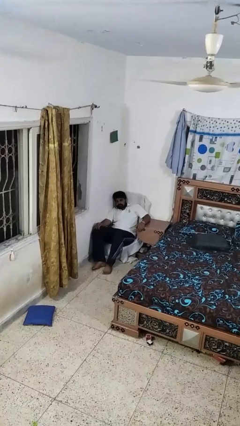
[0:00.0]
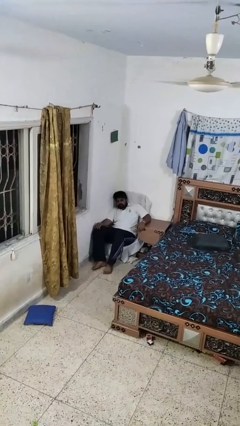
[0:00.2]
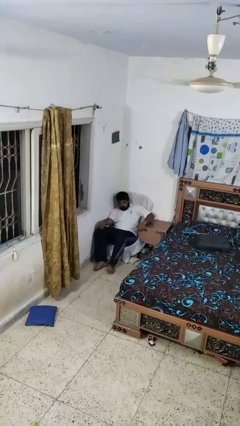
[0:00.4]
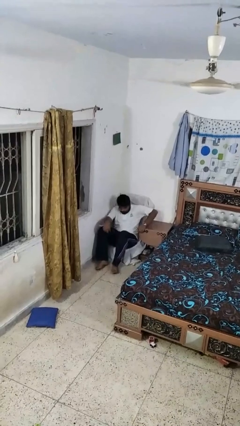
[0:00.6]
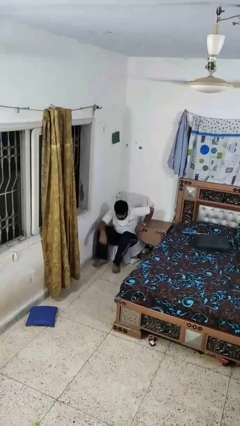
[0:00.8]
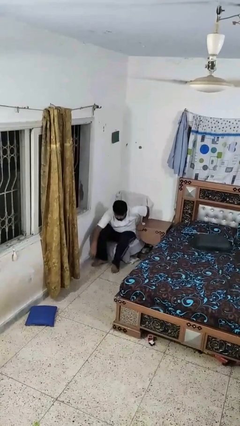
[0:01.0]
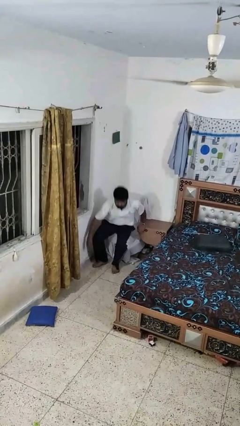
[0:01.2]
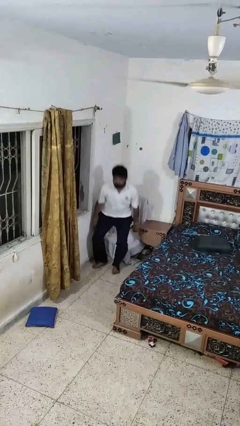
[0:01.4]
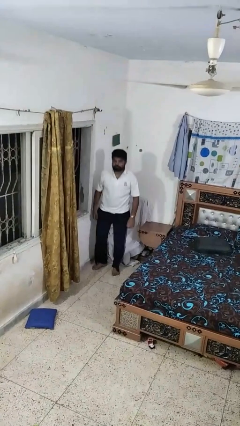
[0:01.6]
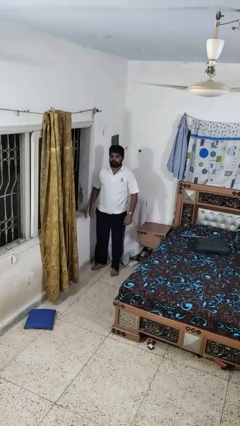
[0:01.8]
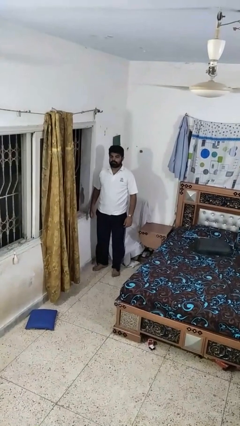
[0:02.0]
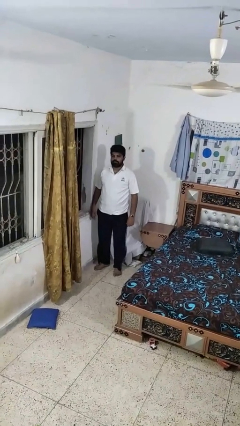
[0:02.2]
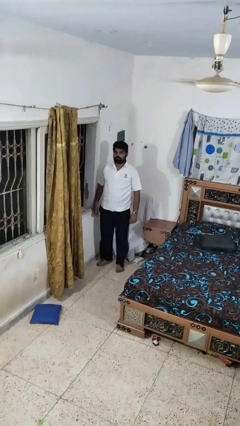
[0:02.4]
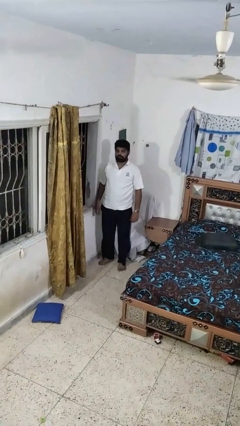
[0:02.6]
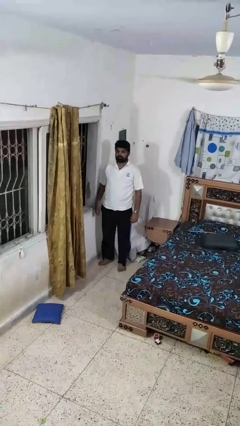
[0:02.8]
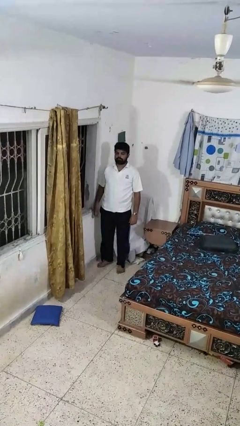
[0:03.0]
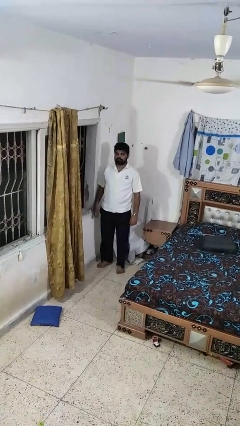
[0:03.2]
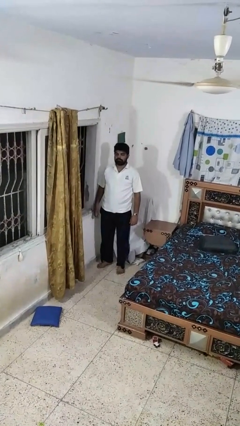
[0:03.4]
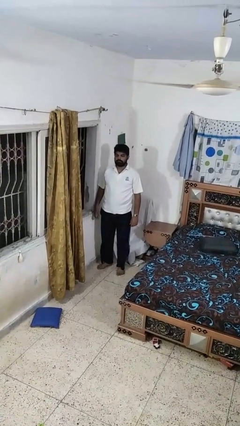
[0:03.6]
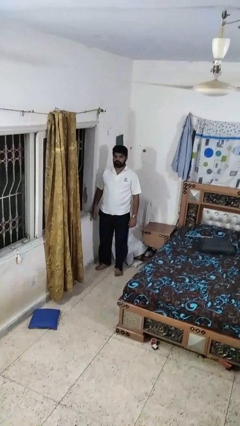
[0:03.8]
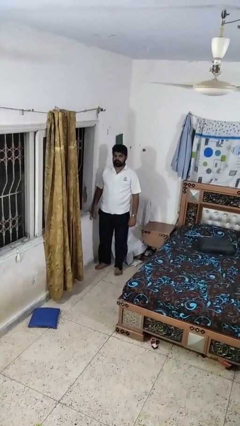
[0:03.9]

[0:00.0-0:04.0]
person stands up

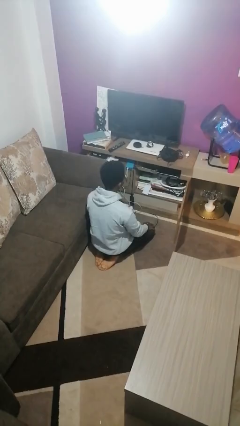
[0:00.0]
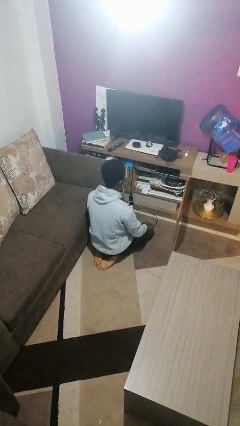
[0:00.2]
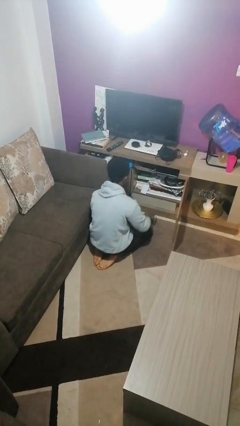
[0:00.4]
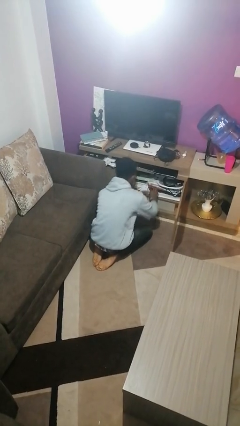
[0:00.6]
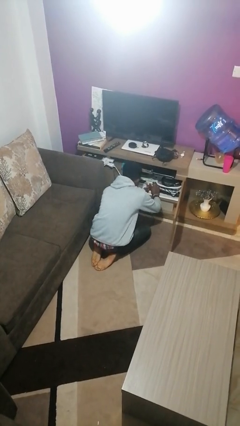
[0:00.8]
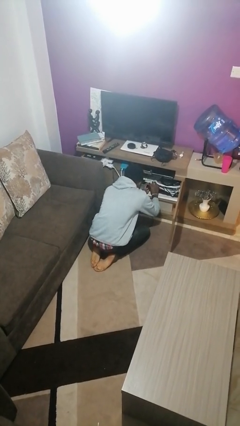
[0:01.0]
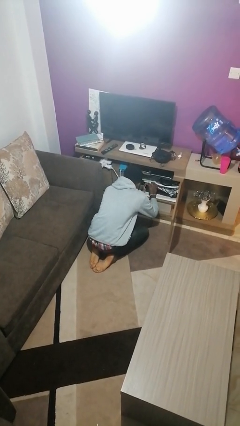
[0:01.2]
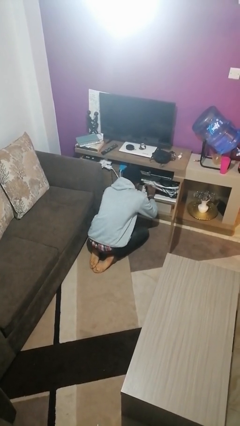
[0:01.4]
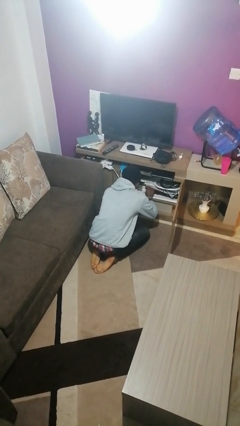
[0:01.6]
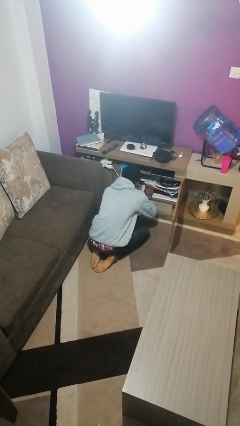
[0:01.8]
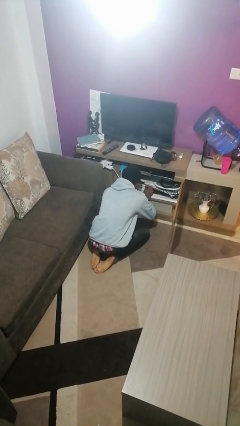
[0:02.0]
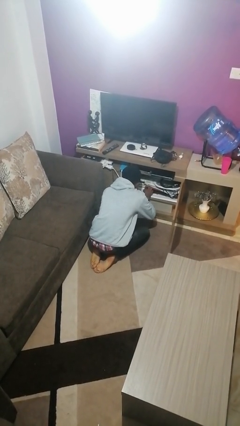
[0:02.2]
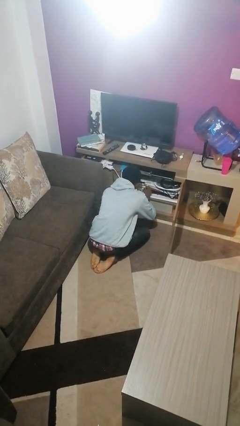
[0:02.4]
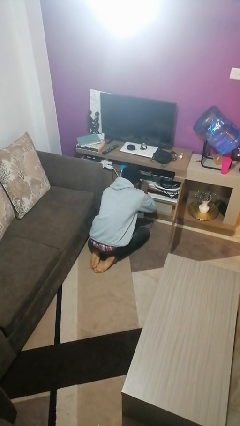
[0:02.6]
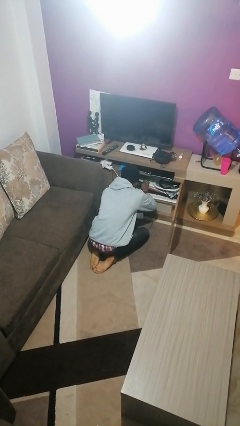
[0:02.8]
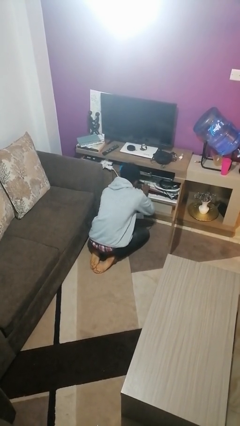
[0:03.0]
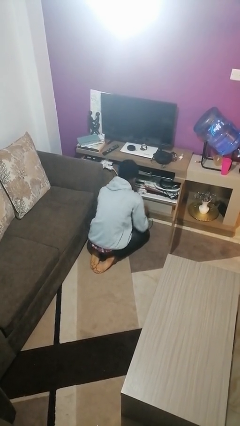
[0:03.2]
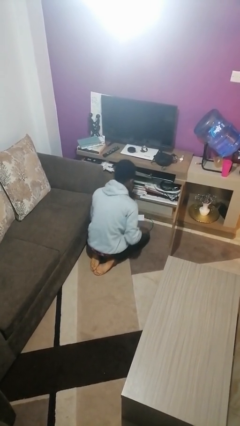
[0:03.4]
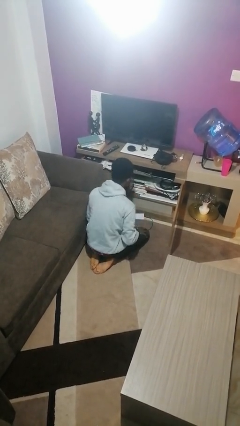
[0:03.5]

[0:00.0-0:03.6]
person searches in cabinet

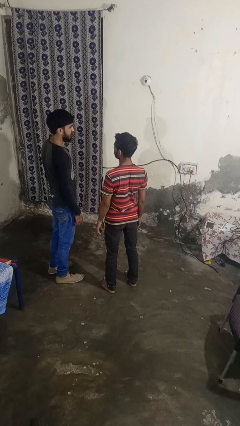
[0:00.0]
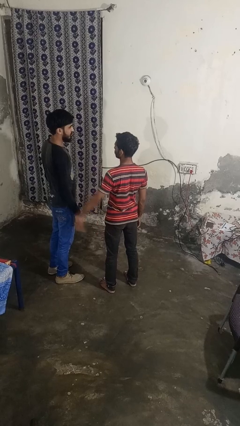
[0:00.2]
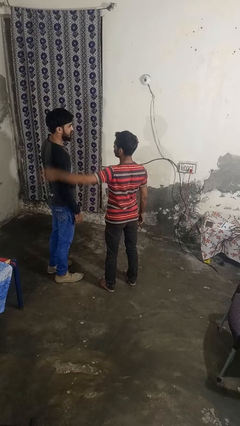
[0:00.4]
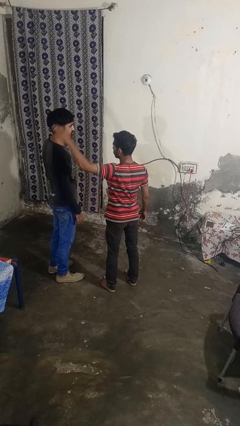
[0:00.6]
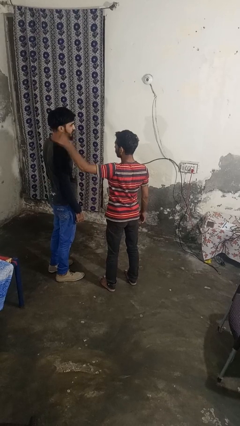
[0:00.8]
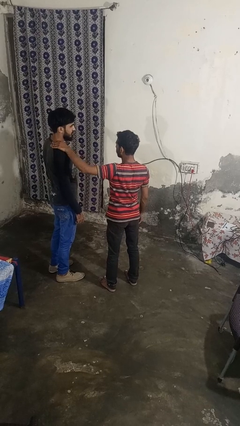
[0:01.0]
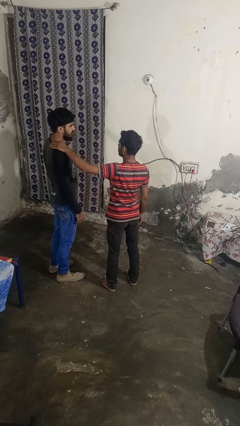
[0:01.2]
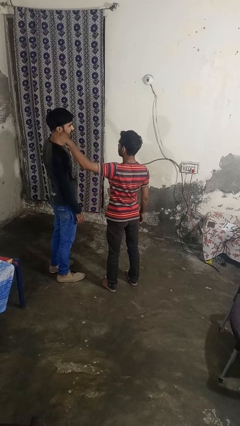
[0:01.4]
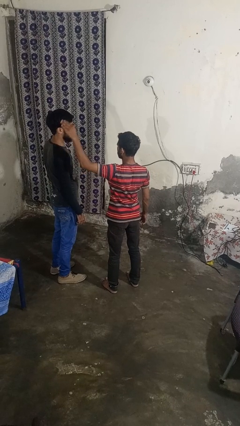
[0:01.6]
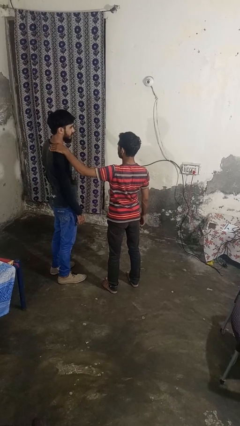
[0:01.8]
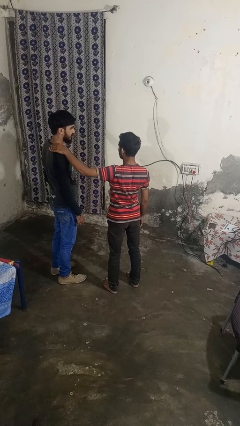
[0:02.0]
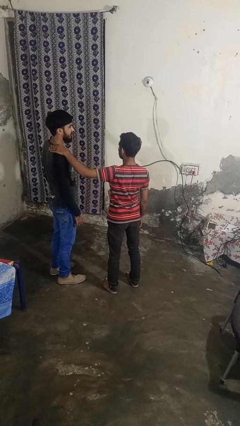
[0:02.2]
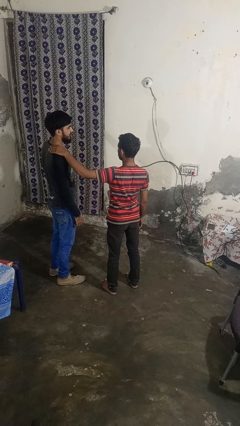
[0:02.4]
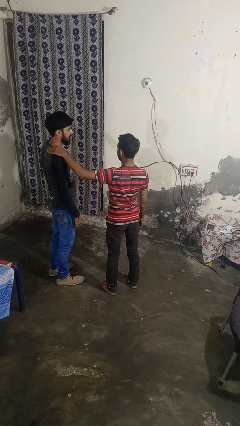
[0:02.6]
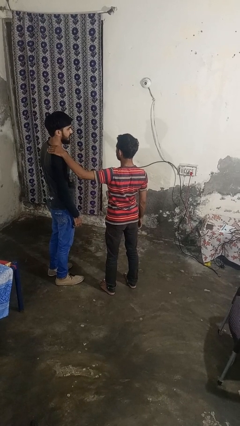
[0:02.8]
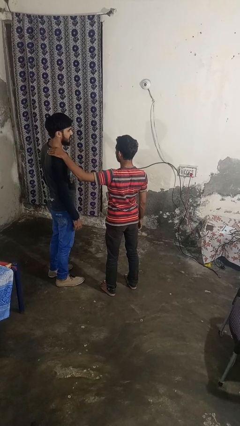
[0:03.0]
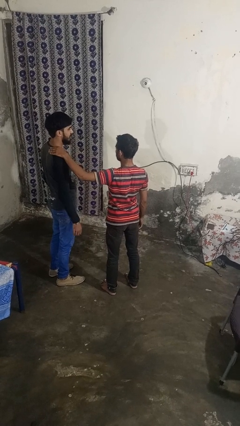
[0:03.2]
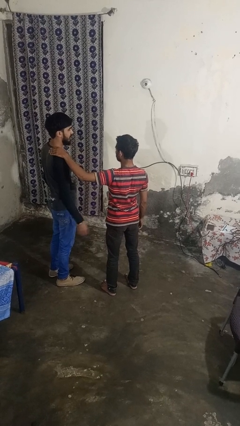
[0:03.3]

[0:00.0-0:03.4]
person pounds shoulders of person

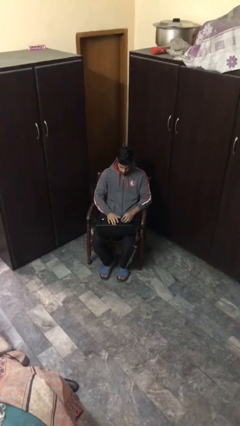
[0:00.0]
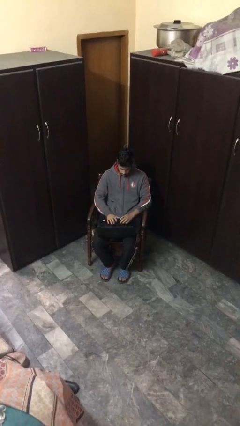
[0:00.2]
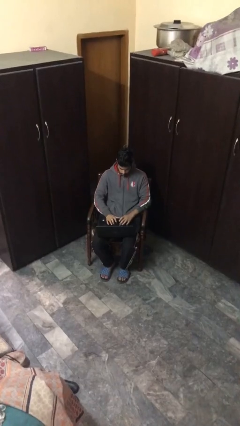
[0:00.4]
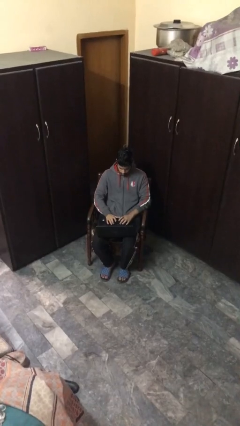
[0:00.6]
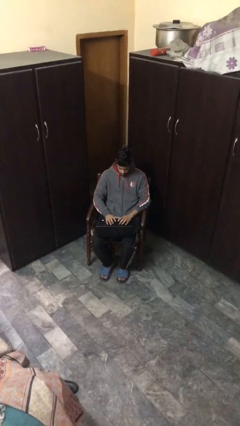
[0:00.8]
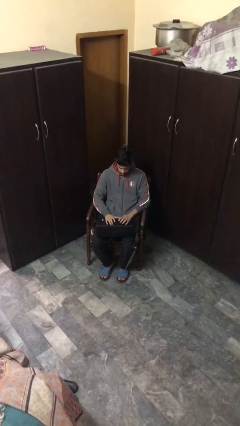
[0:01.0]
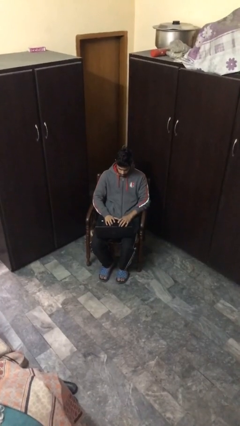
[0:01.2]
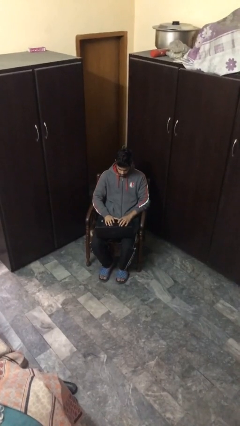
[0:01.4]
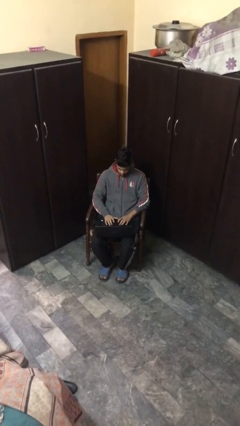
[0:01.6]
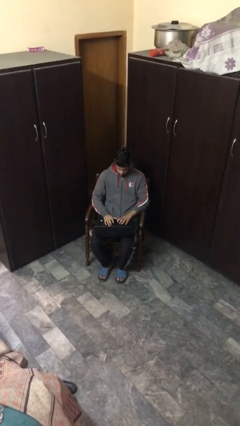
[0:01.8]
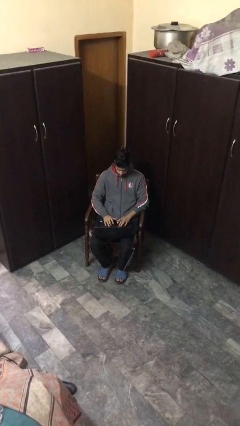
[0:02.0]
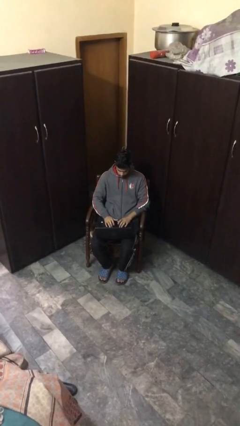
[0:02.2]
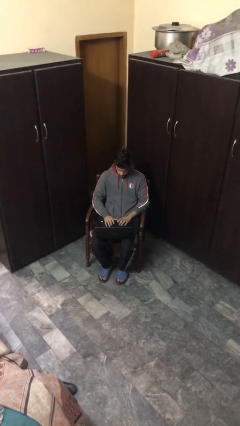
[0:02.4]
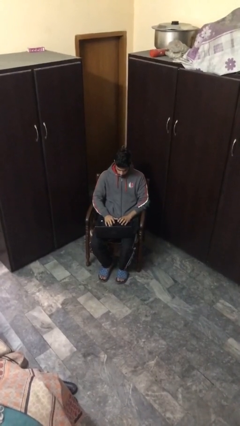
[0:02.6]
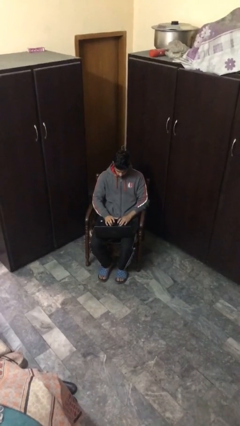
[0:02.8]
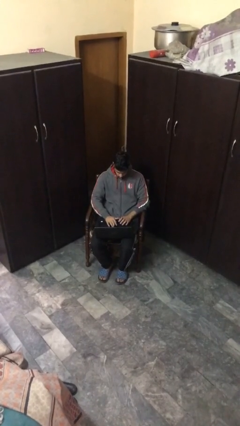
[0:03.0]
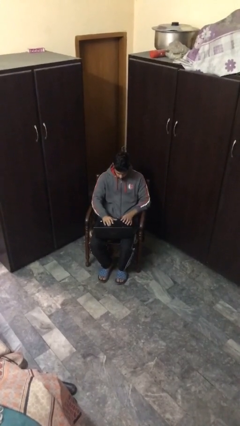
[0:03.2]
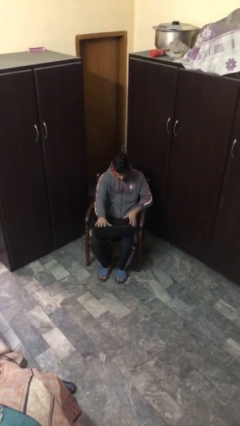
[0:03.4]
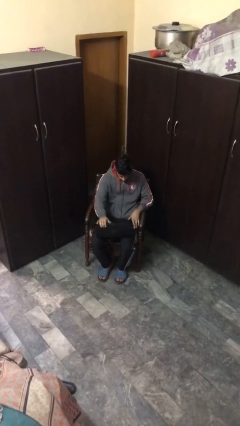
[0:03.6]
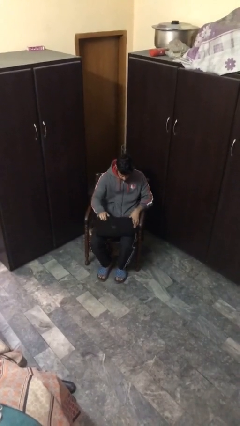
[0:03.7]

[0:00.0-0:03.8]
person interacts with laptop

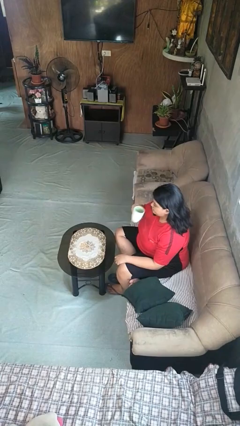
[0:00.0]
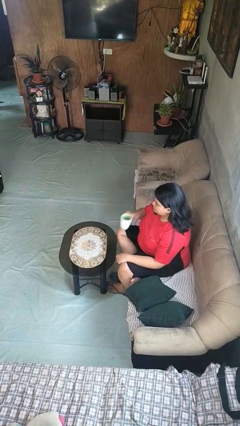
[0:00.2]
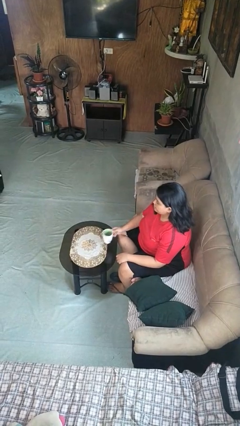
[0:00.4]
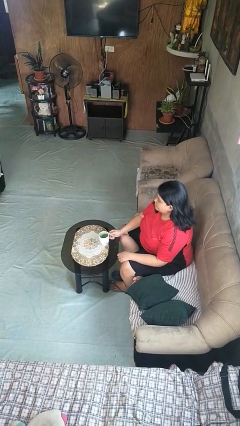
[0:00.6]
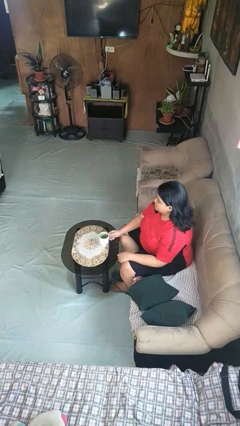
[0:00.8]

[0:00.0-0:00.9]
person puts down object on table

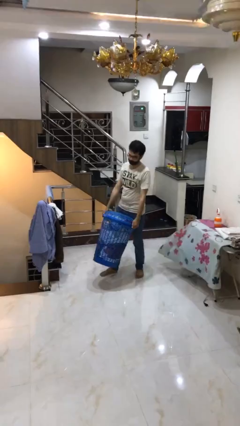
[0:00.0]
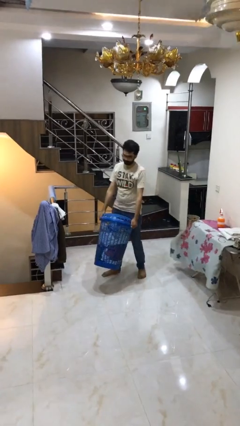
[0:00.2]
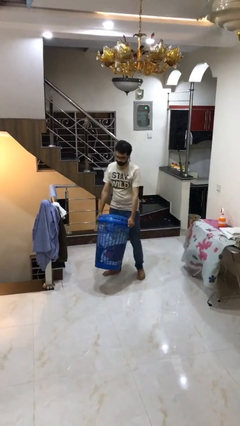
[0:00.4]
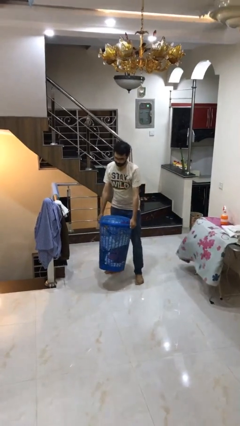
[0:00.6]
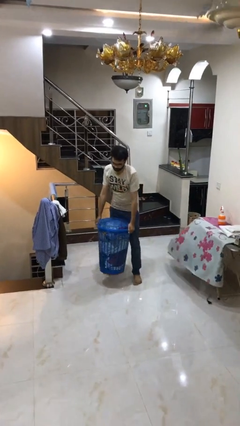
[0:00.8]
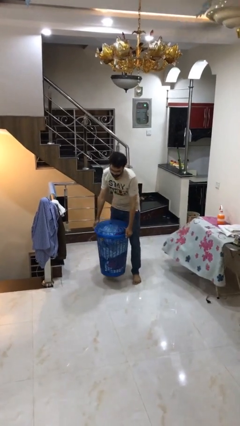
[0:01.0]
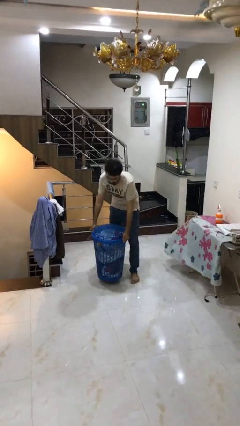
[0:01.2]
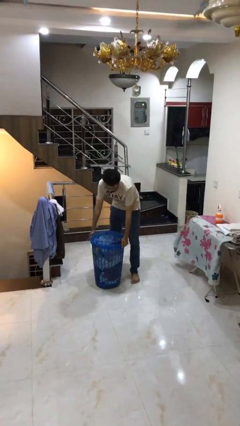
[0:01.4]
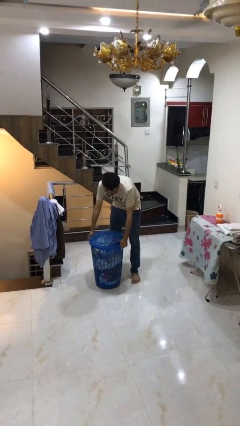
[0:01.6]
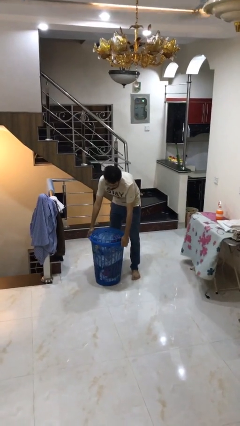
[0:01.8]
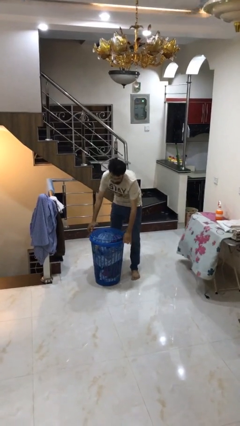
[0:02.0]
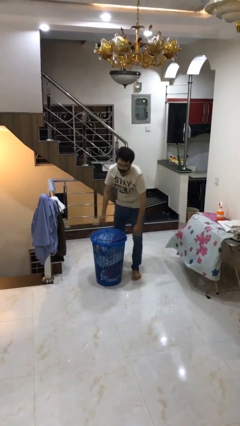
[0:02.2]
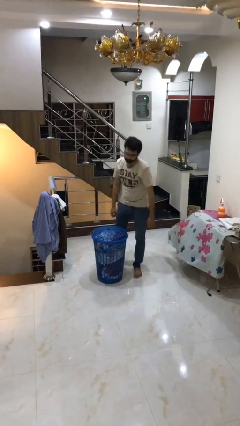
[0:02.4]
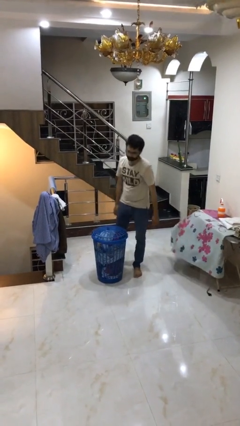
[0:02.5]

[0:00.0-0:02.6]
person puts down object on floor
